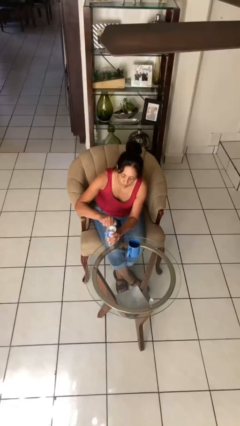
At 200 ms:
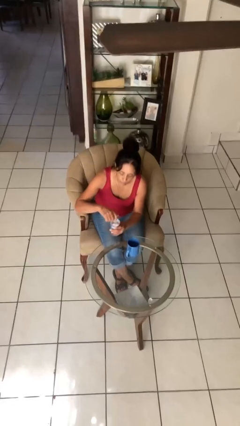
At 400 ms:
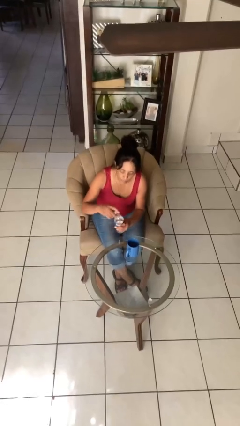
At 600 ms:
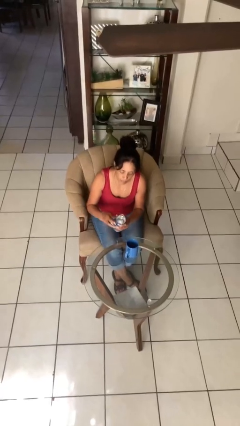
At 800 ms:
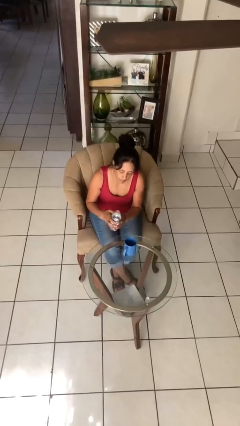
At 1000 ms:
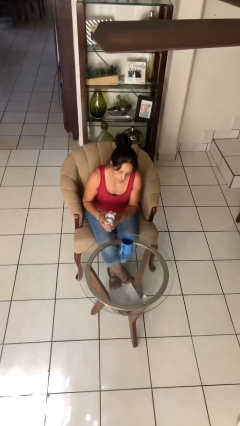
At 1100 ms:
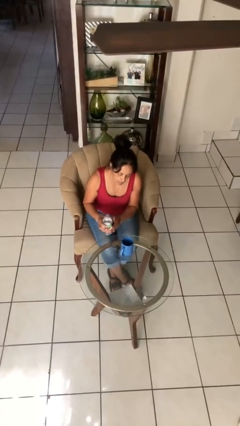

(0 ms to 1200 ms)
person unscrews lid from bottle

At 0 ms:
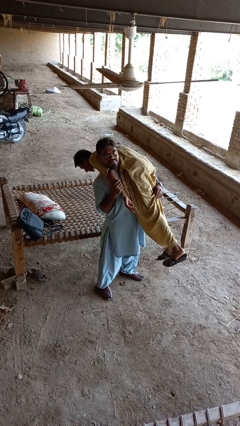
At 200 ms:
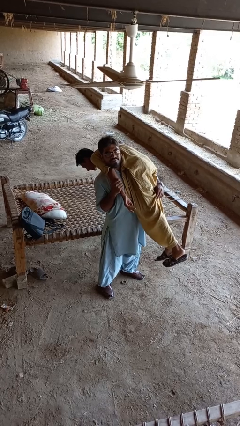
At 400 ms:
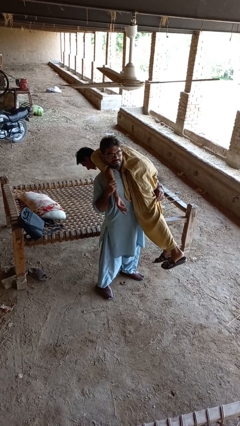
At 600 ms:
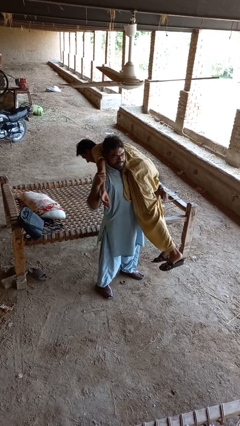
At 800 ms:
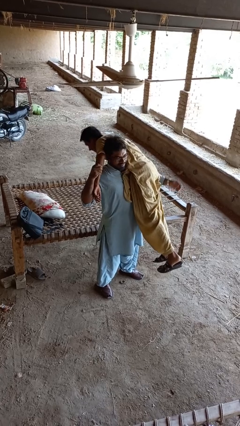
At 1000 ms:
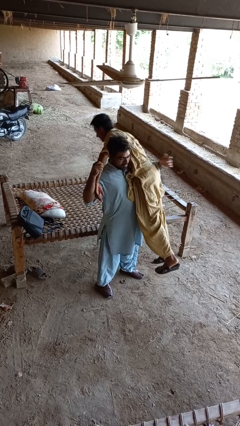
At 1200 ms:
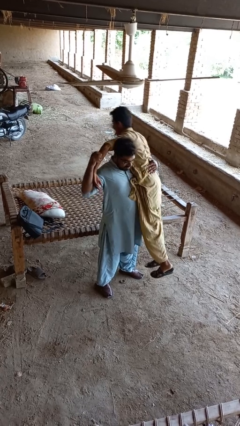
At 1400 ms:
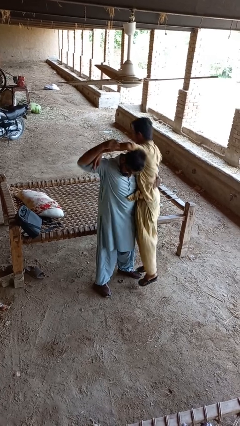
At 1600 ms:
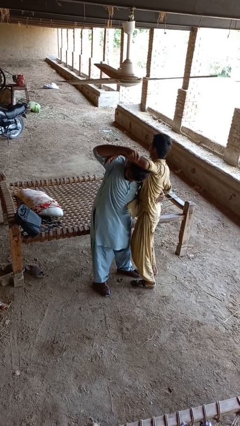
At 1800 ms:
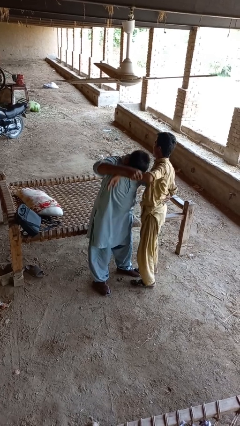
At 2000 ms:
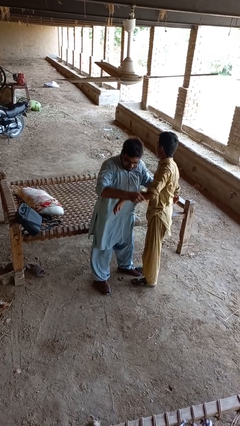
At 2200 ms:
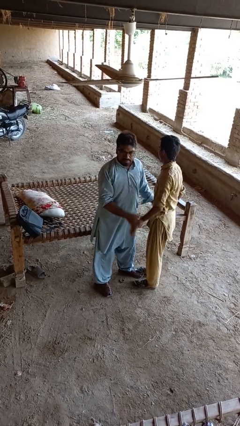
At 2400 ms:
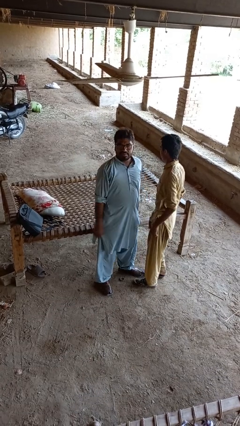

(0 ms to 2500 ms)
person puts down person

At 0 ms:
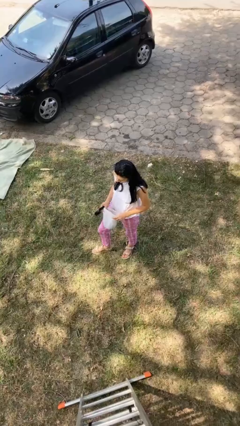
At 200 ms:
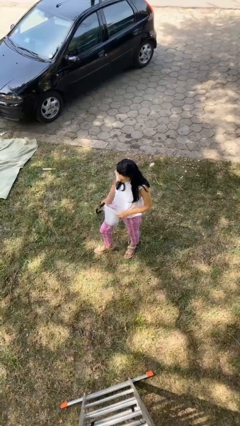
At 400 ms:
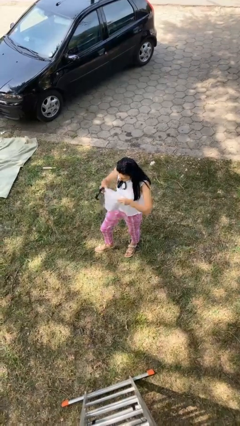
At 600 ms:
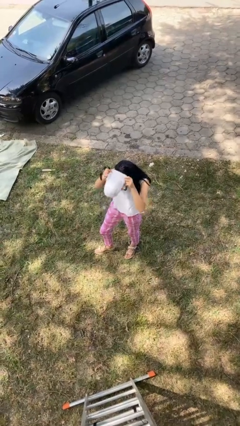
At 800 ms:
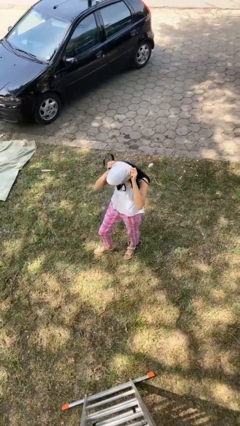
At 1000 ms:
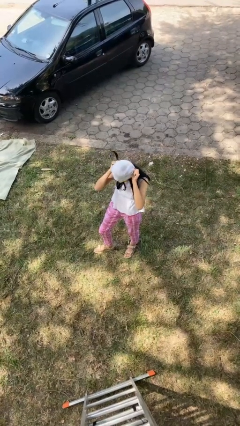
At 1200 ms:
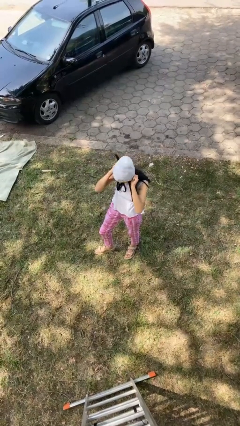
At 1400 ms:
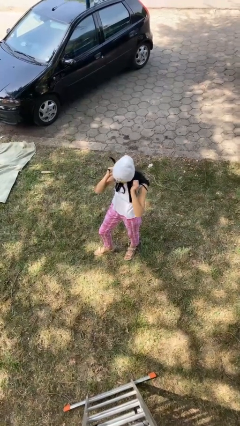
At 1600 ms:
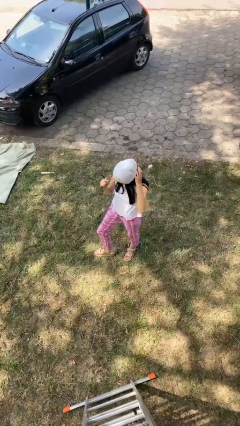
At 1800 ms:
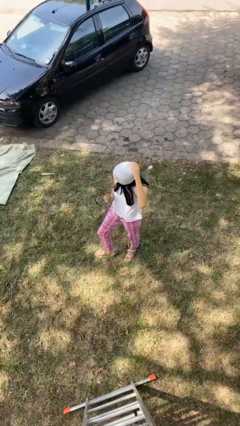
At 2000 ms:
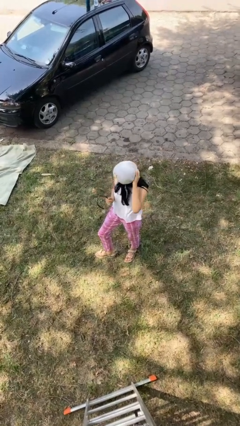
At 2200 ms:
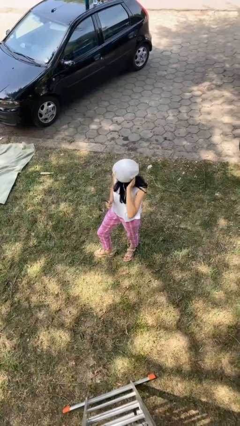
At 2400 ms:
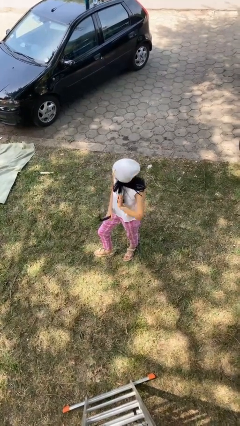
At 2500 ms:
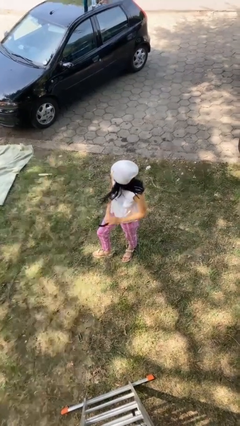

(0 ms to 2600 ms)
person puts on hat

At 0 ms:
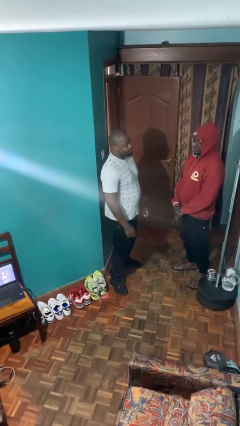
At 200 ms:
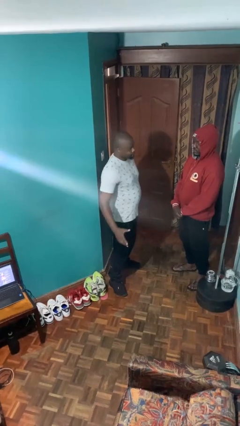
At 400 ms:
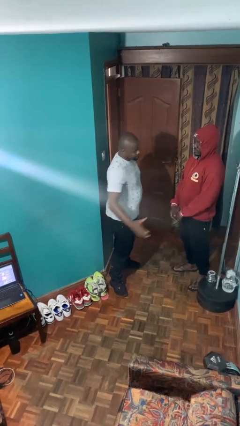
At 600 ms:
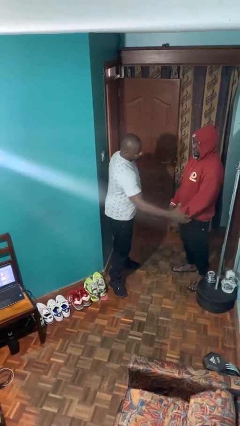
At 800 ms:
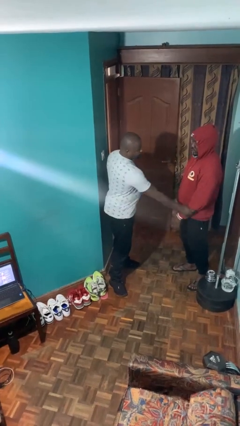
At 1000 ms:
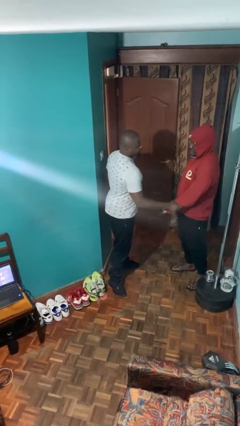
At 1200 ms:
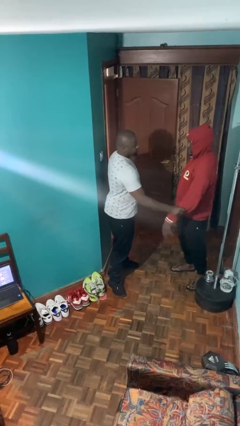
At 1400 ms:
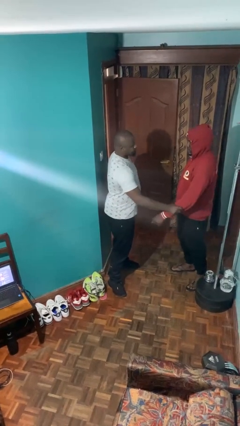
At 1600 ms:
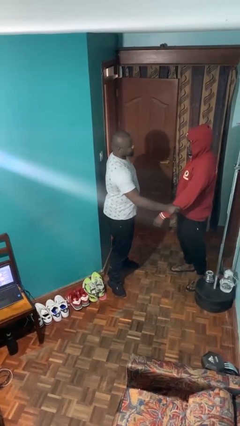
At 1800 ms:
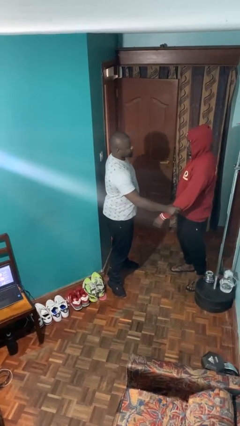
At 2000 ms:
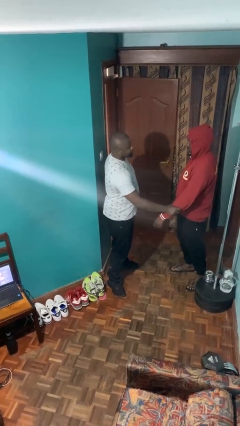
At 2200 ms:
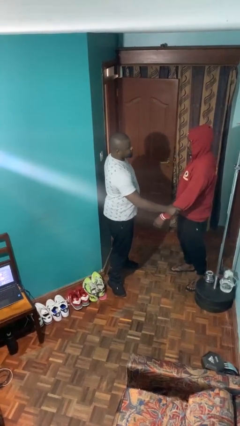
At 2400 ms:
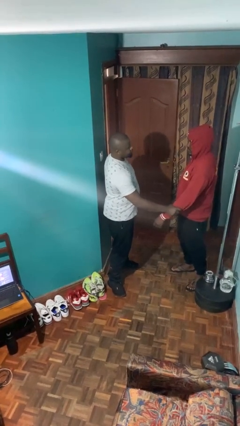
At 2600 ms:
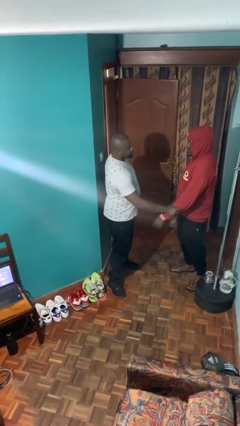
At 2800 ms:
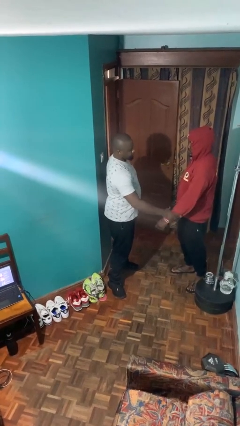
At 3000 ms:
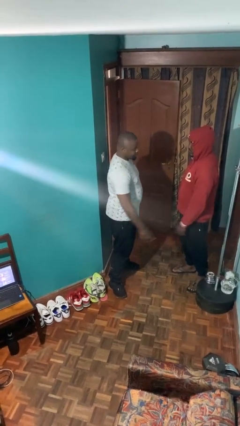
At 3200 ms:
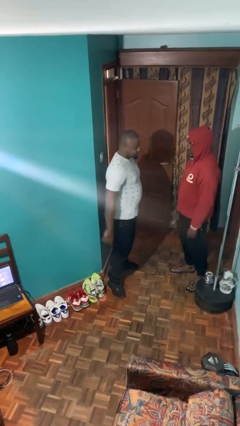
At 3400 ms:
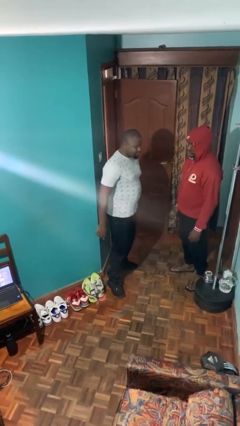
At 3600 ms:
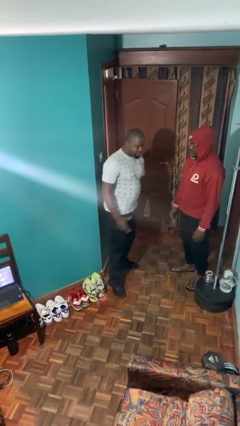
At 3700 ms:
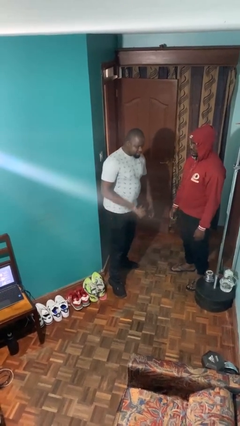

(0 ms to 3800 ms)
person grabs person by forearm

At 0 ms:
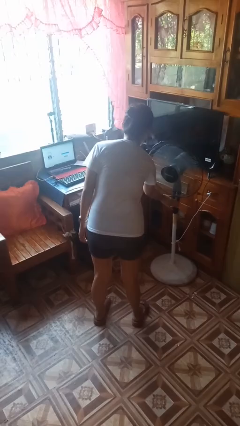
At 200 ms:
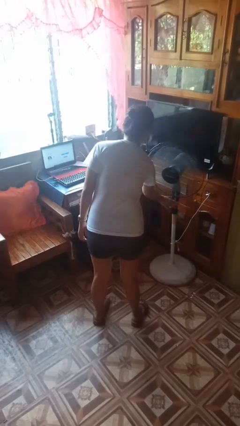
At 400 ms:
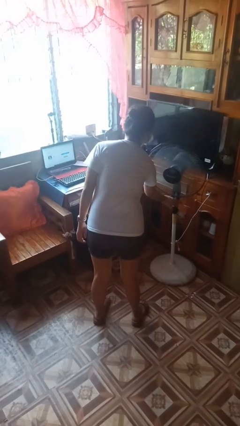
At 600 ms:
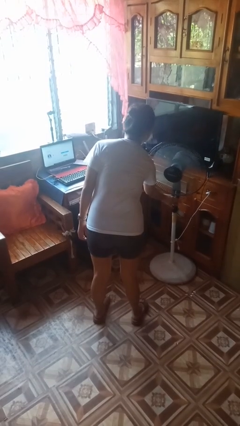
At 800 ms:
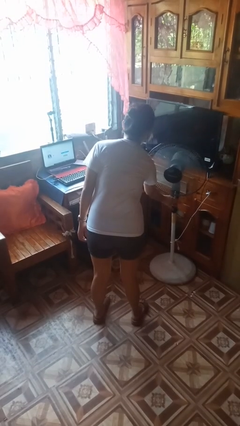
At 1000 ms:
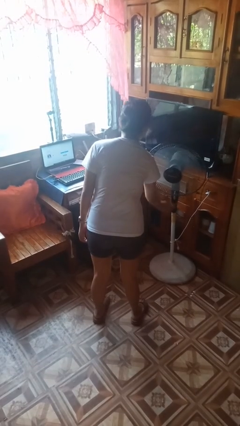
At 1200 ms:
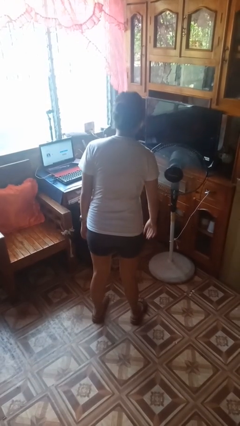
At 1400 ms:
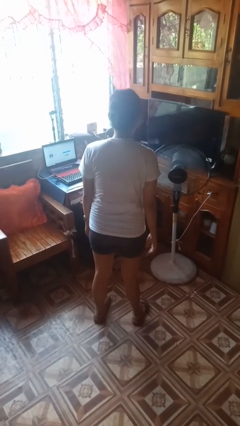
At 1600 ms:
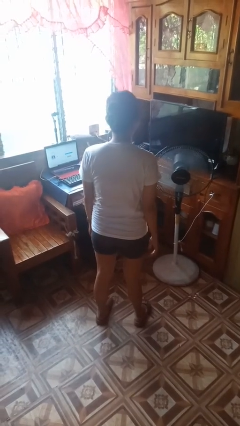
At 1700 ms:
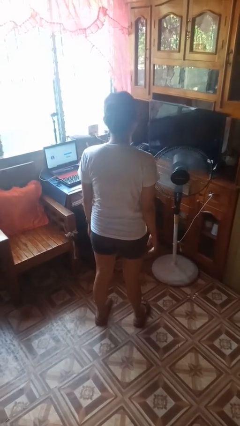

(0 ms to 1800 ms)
person turns off fan

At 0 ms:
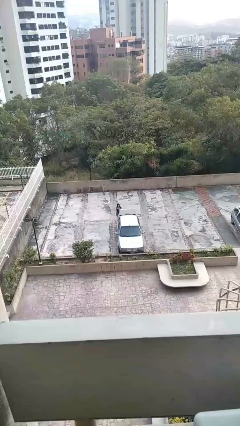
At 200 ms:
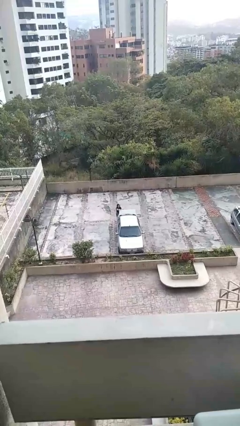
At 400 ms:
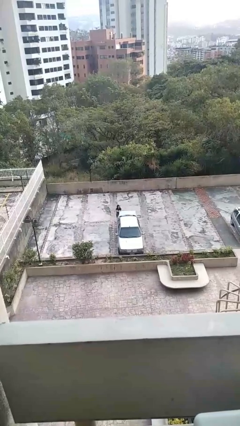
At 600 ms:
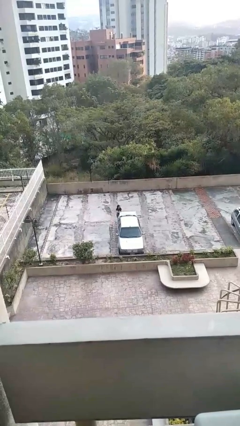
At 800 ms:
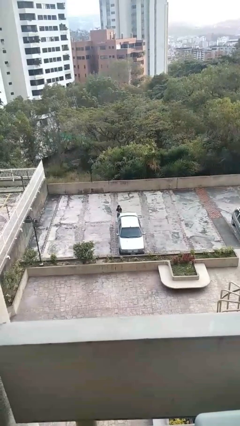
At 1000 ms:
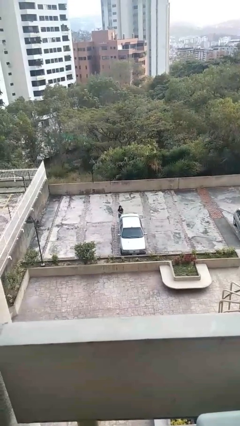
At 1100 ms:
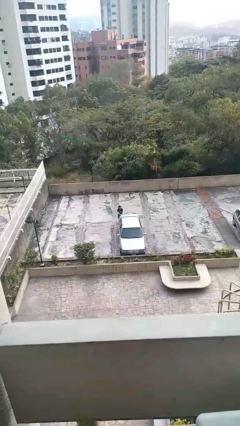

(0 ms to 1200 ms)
person closes car trunk

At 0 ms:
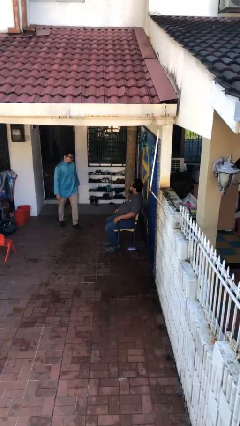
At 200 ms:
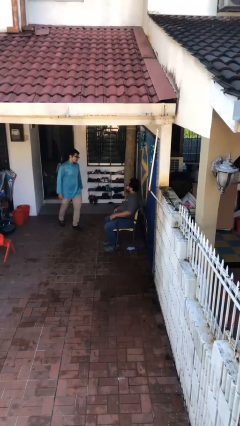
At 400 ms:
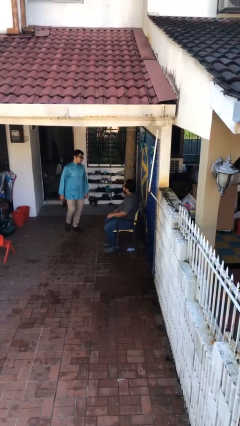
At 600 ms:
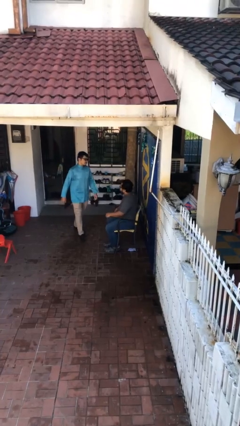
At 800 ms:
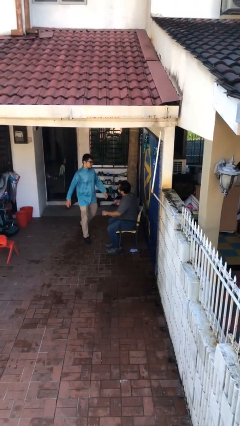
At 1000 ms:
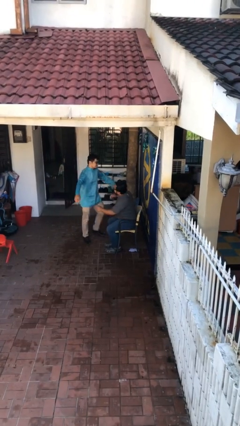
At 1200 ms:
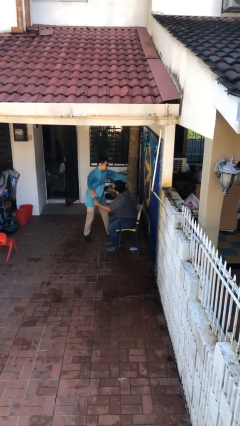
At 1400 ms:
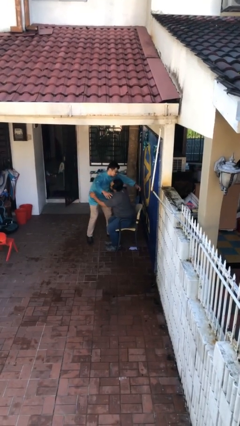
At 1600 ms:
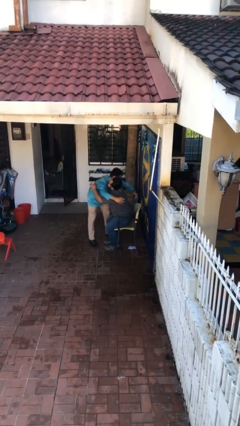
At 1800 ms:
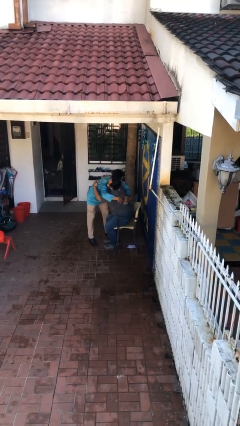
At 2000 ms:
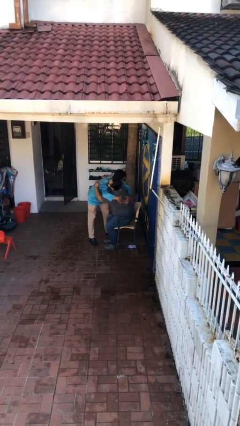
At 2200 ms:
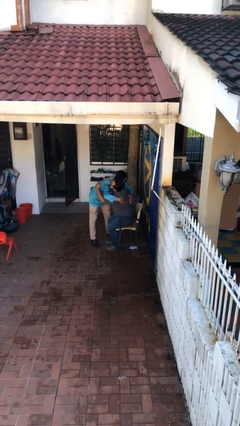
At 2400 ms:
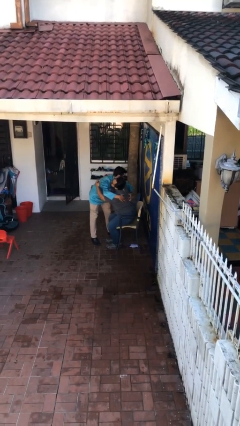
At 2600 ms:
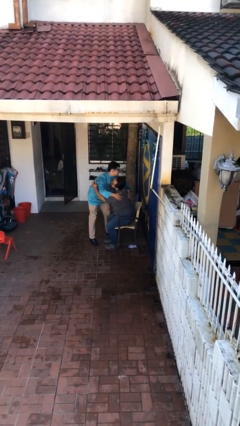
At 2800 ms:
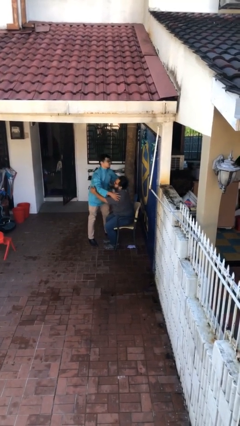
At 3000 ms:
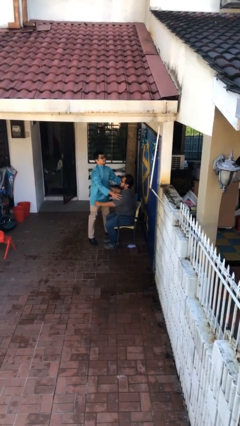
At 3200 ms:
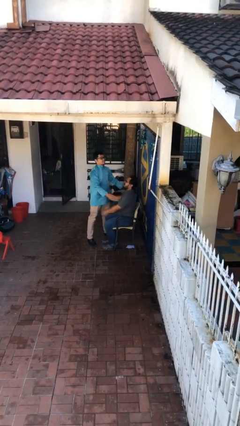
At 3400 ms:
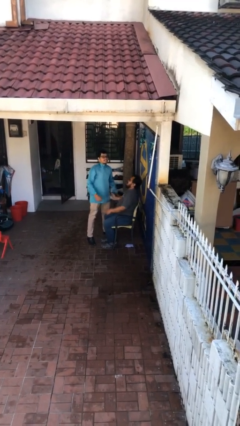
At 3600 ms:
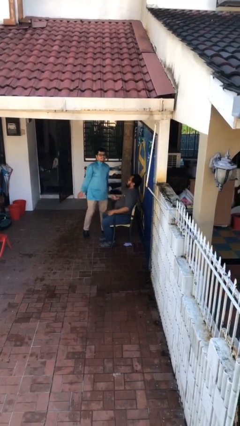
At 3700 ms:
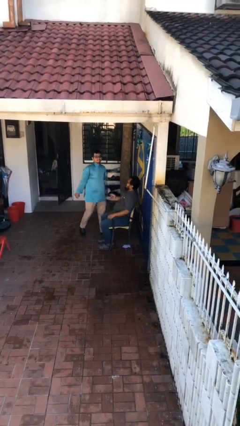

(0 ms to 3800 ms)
person embraces person
